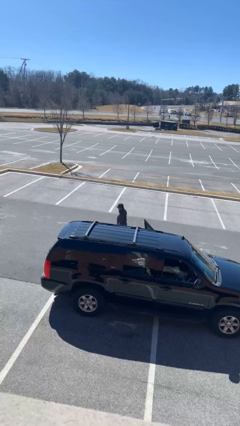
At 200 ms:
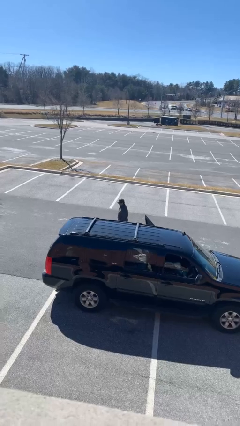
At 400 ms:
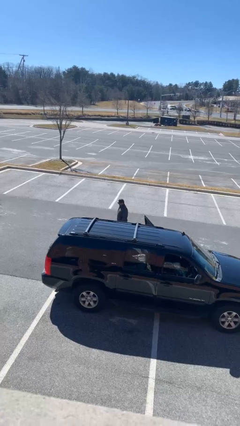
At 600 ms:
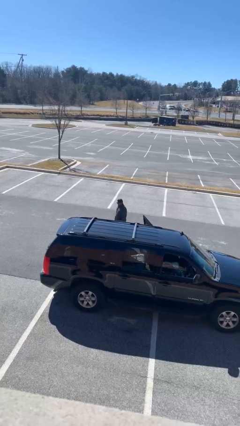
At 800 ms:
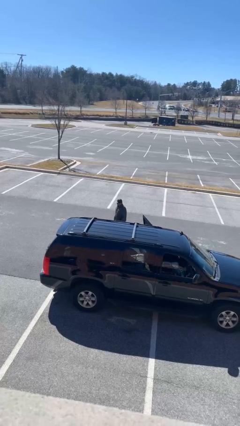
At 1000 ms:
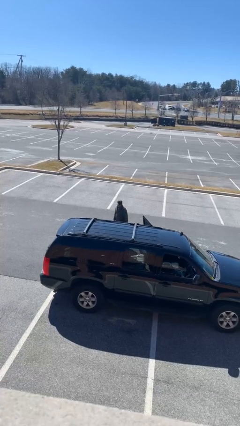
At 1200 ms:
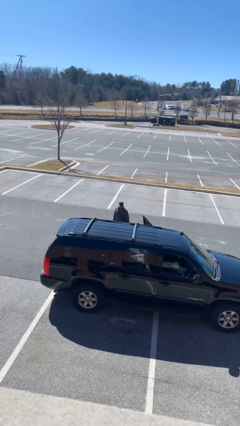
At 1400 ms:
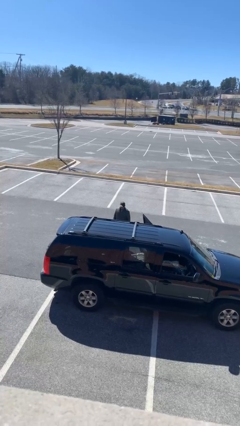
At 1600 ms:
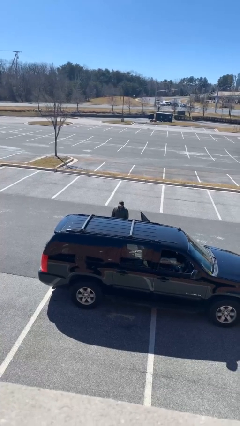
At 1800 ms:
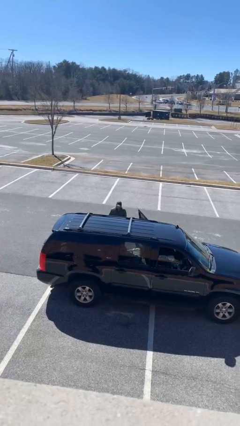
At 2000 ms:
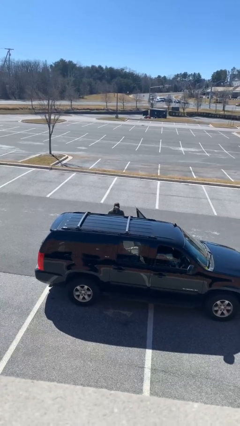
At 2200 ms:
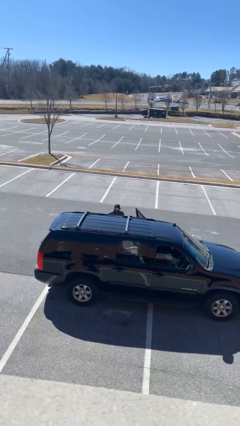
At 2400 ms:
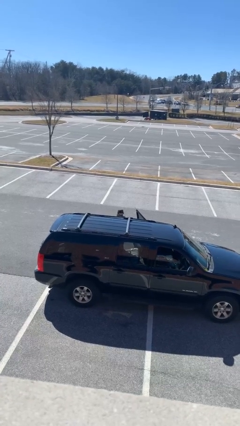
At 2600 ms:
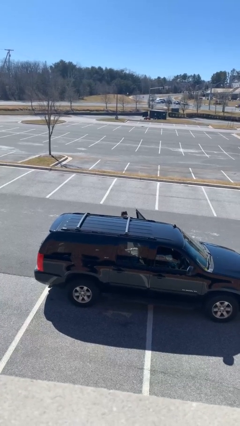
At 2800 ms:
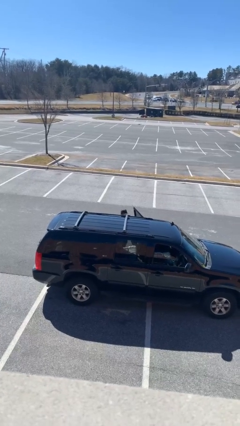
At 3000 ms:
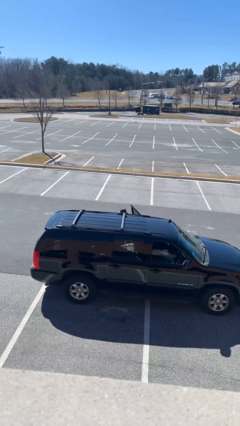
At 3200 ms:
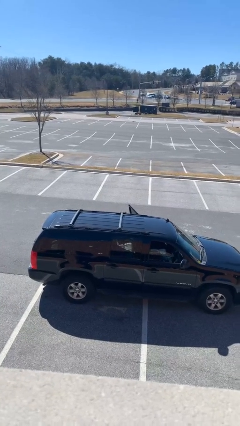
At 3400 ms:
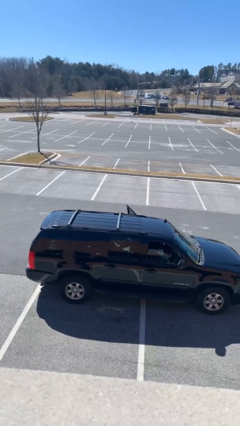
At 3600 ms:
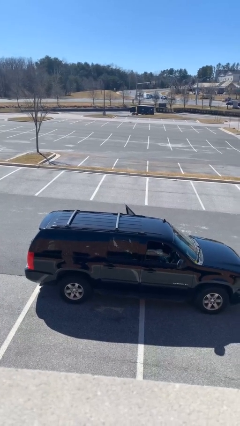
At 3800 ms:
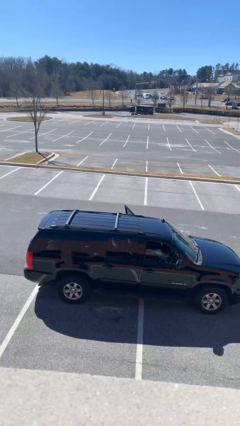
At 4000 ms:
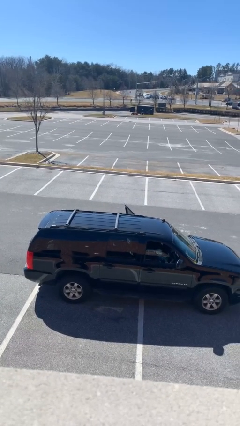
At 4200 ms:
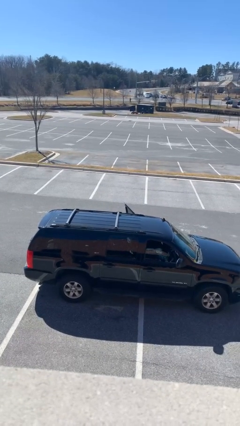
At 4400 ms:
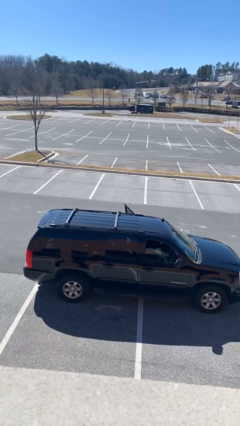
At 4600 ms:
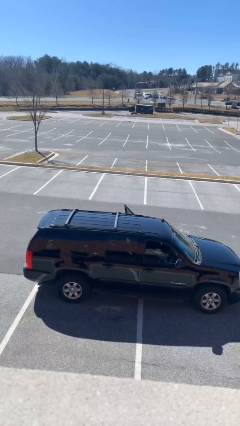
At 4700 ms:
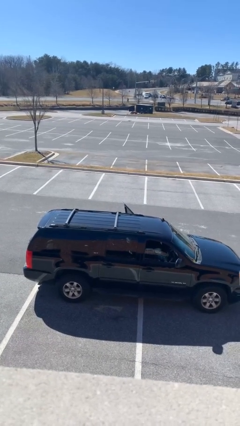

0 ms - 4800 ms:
person enters car

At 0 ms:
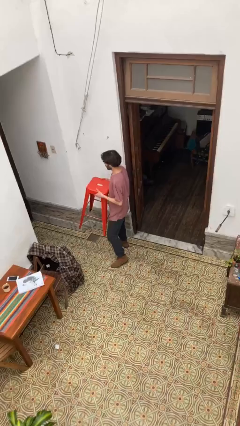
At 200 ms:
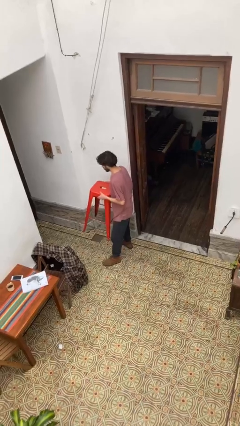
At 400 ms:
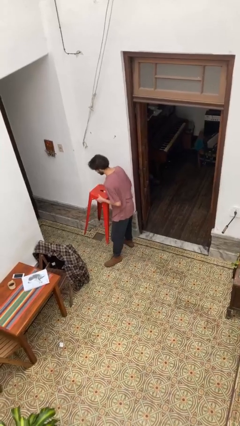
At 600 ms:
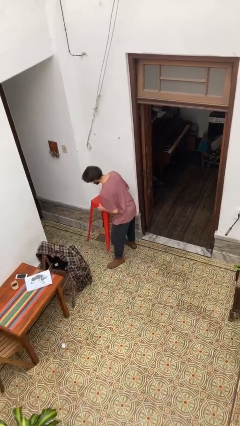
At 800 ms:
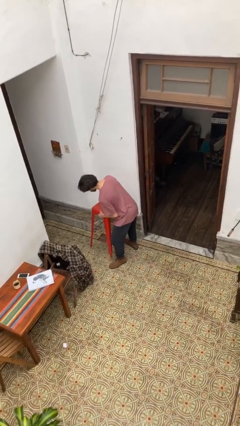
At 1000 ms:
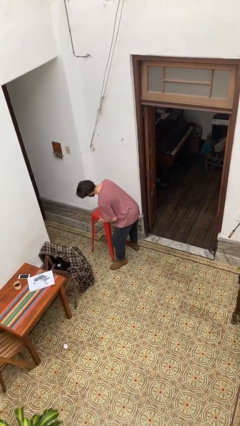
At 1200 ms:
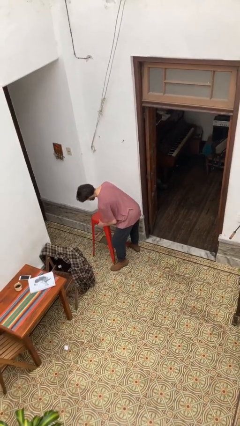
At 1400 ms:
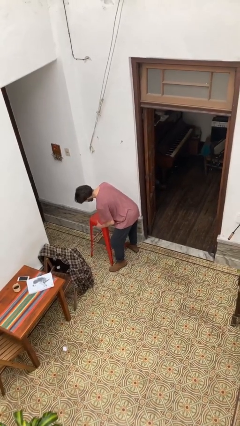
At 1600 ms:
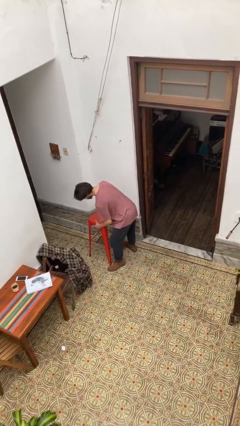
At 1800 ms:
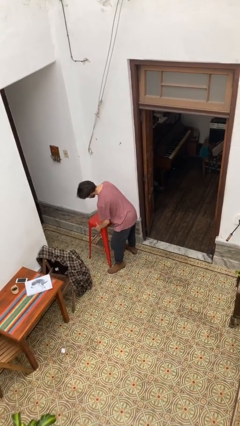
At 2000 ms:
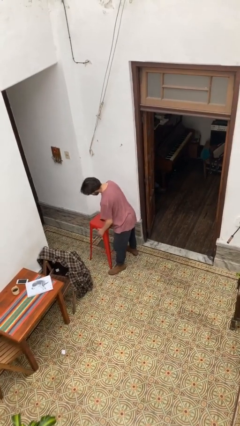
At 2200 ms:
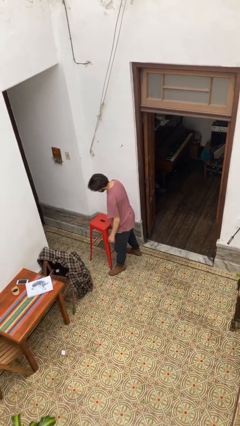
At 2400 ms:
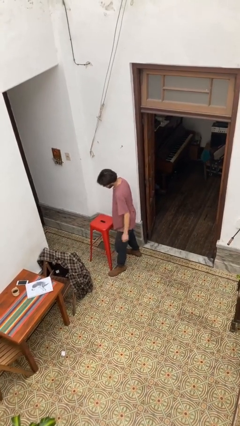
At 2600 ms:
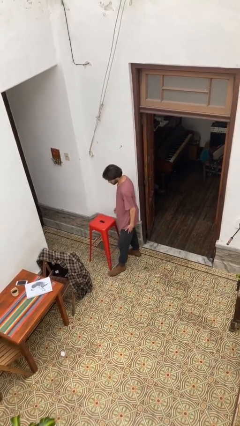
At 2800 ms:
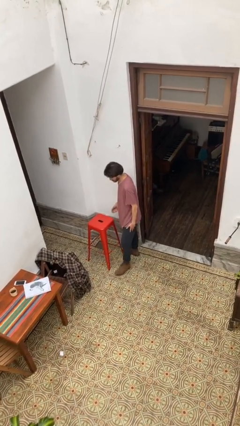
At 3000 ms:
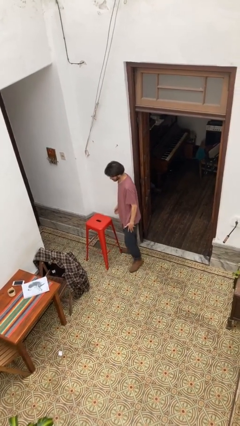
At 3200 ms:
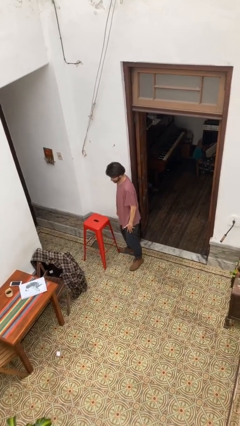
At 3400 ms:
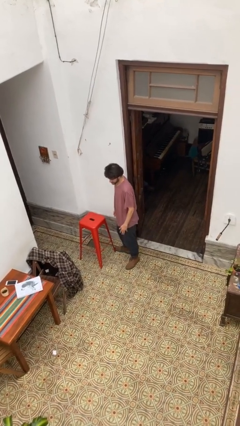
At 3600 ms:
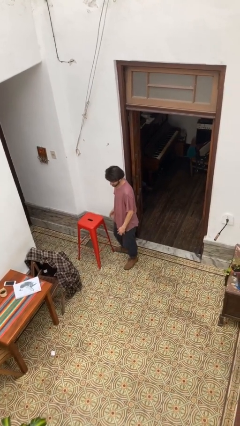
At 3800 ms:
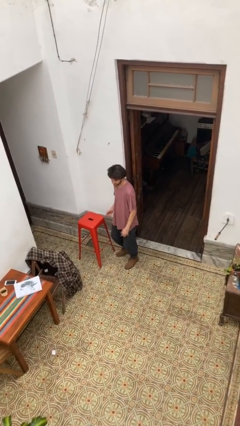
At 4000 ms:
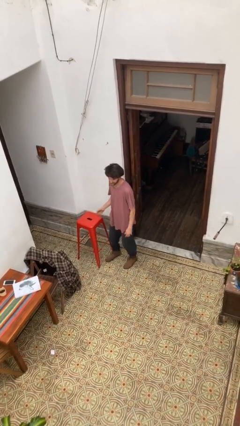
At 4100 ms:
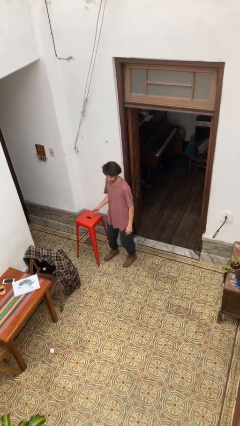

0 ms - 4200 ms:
person puts down object on floor

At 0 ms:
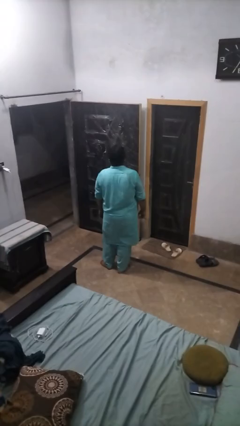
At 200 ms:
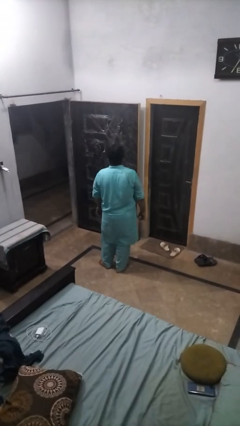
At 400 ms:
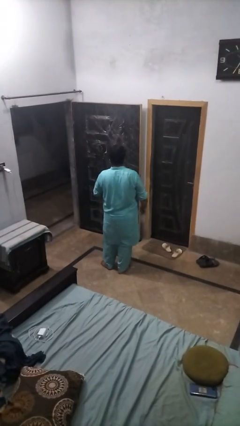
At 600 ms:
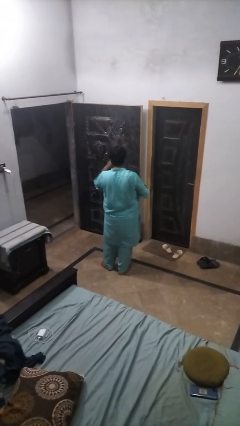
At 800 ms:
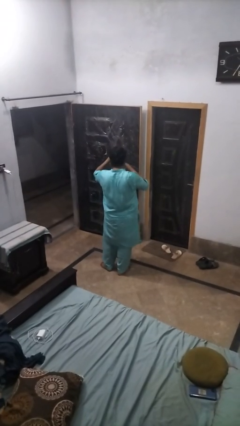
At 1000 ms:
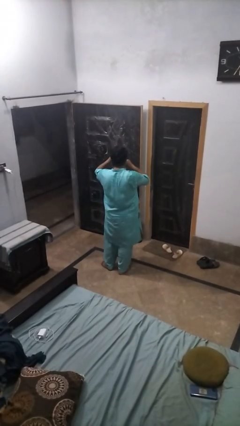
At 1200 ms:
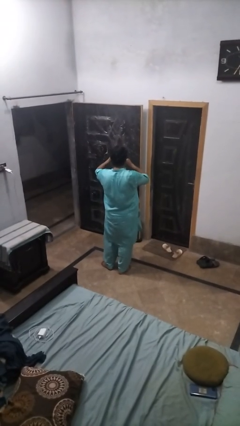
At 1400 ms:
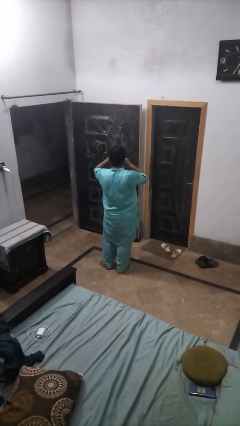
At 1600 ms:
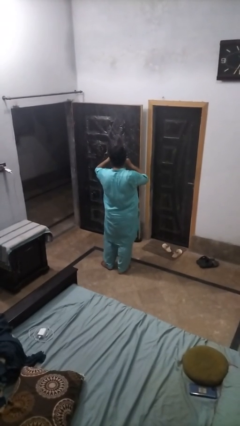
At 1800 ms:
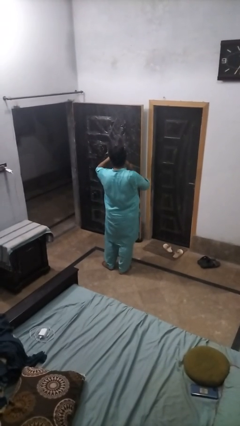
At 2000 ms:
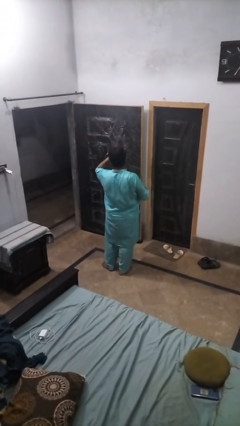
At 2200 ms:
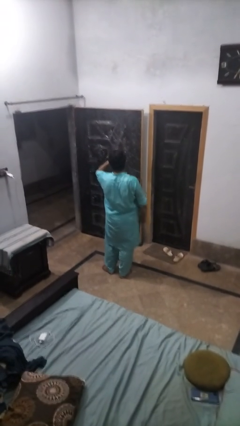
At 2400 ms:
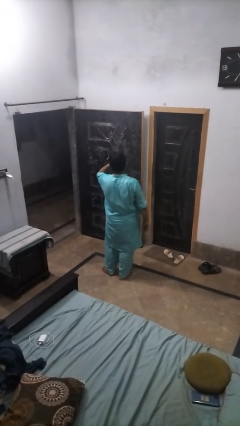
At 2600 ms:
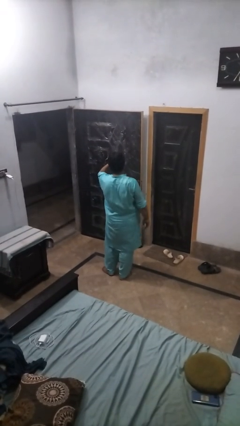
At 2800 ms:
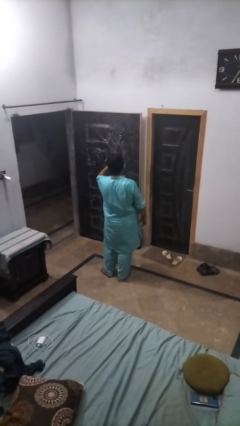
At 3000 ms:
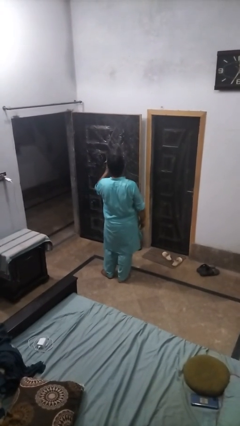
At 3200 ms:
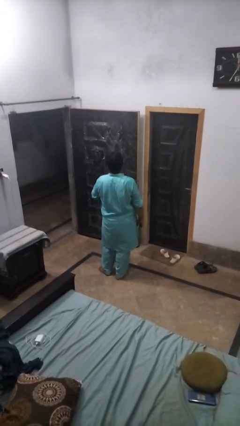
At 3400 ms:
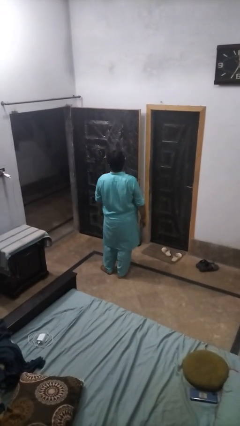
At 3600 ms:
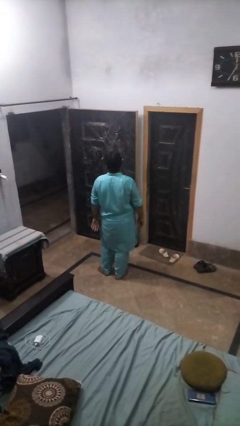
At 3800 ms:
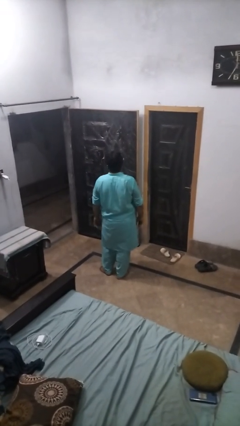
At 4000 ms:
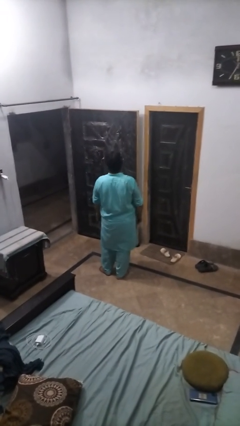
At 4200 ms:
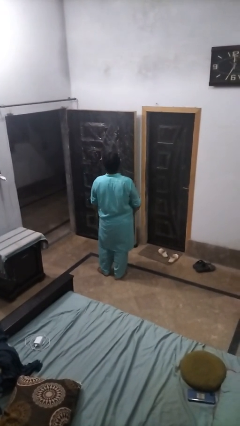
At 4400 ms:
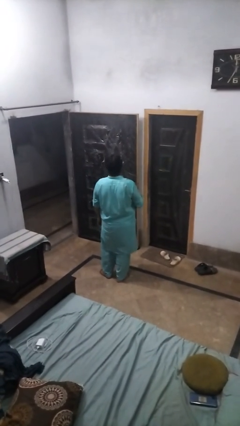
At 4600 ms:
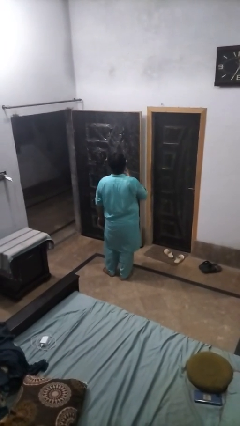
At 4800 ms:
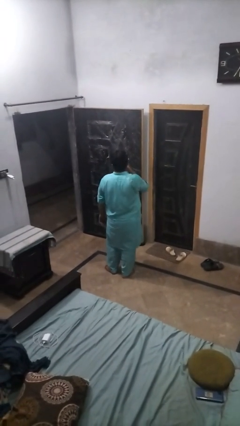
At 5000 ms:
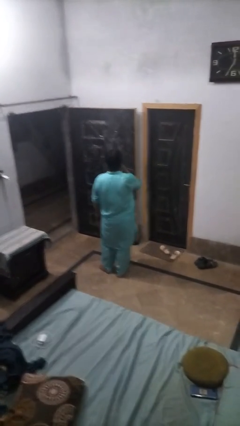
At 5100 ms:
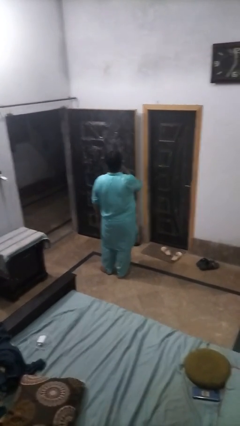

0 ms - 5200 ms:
person vapes

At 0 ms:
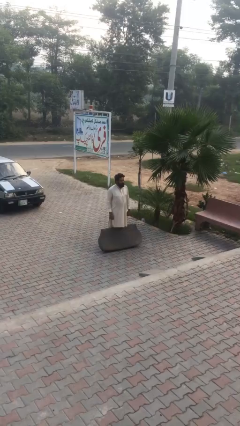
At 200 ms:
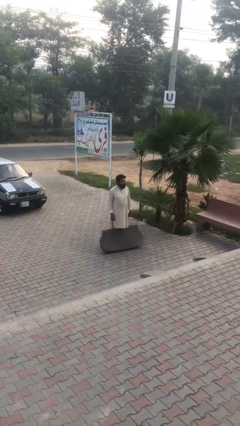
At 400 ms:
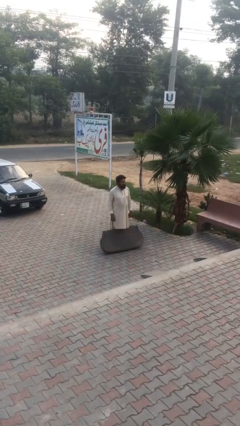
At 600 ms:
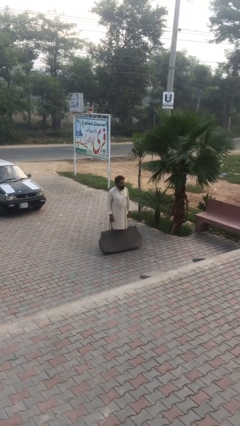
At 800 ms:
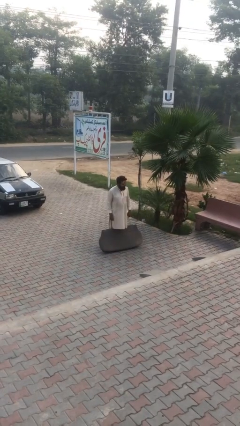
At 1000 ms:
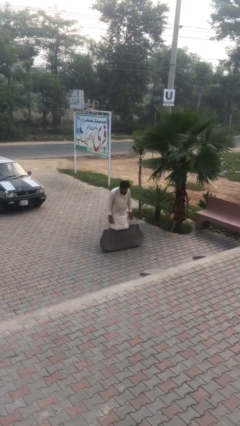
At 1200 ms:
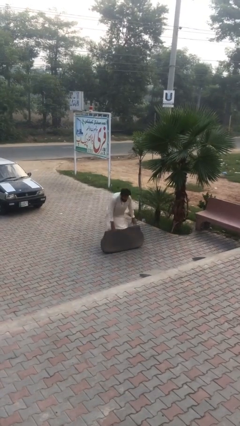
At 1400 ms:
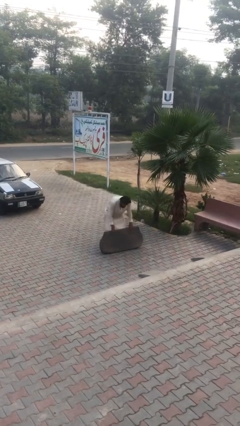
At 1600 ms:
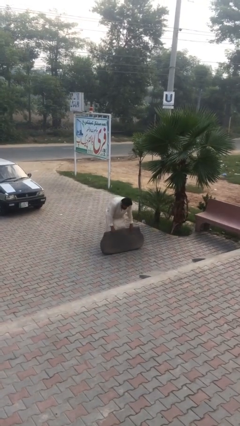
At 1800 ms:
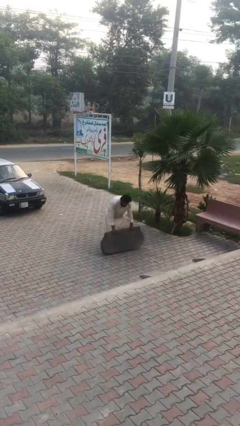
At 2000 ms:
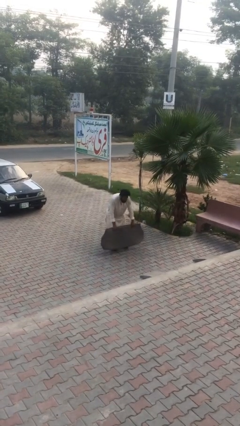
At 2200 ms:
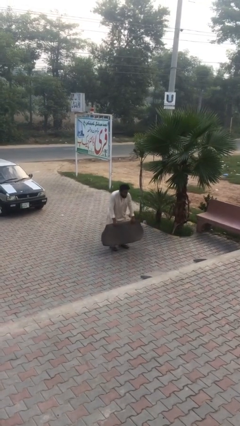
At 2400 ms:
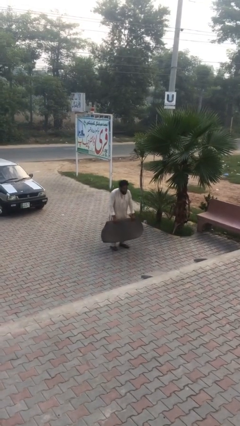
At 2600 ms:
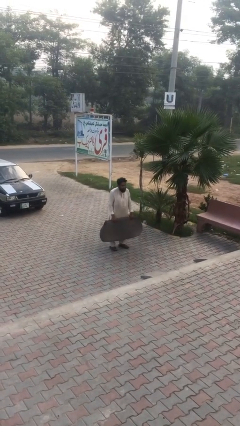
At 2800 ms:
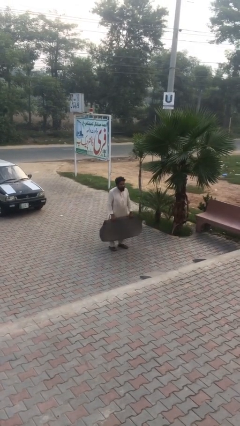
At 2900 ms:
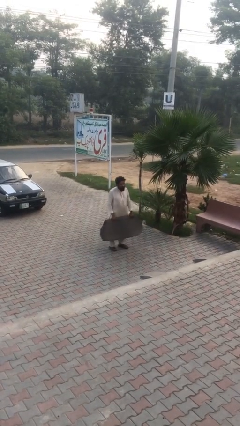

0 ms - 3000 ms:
person picks up object from floor

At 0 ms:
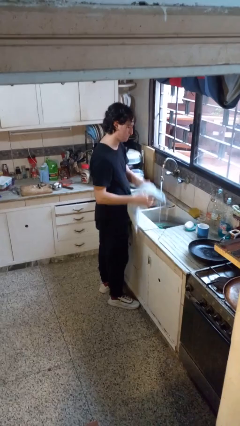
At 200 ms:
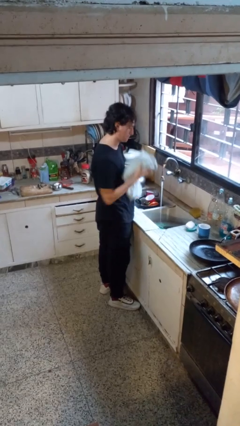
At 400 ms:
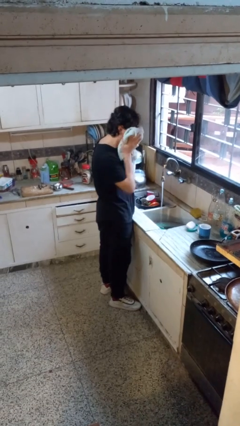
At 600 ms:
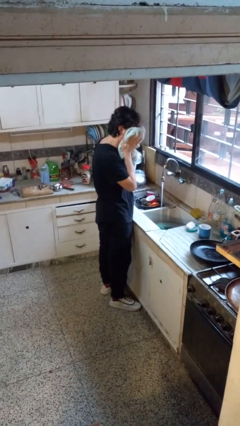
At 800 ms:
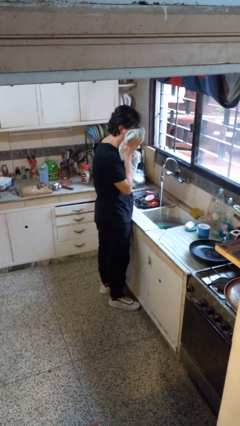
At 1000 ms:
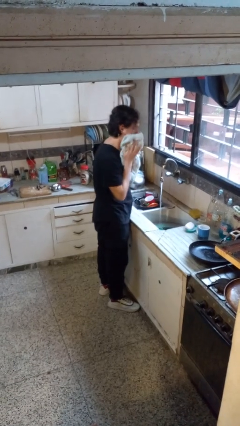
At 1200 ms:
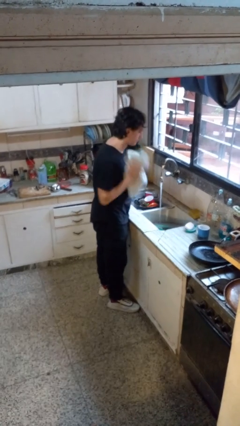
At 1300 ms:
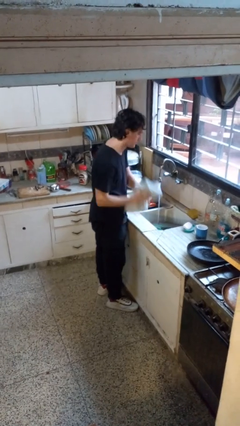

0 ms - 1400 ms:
person dries face with towel
